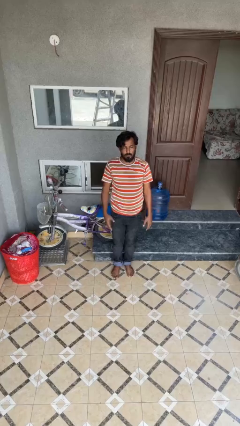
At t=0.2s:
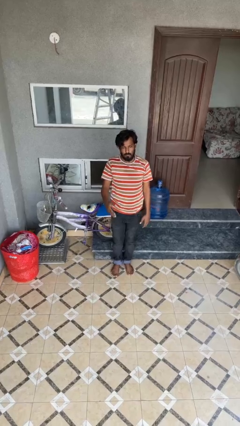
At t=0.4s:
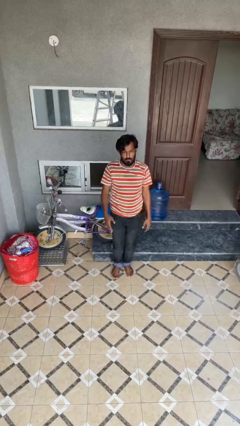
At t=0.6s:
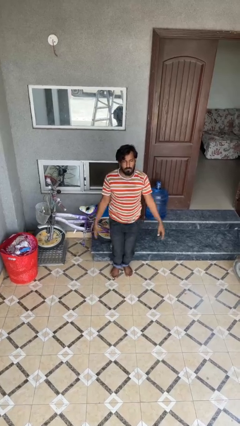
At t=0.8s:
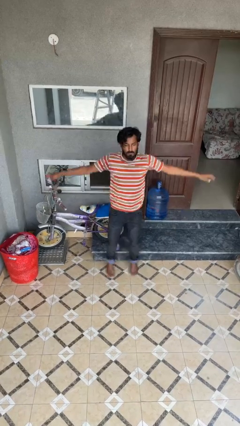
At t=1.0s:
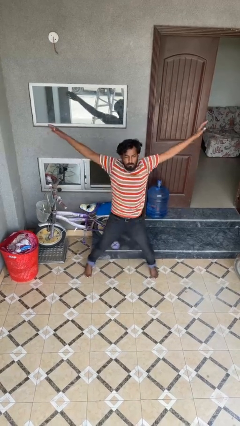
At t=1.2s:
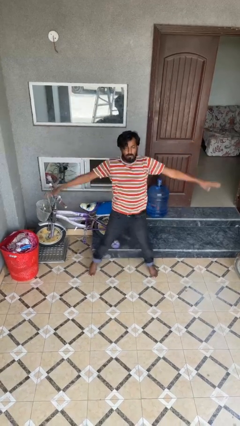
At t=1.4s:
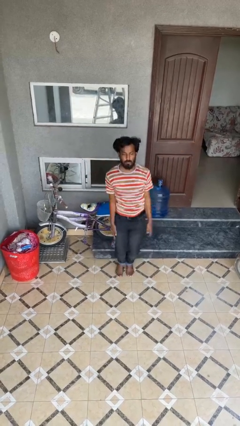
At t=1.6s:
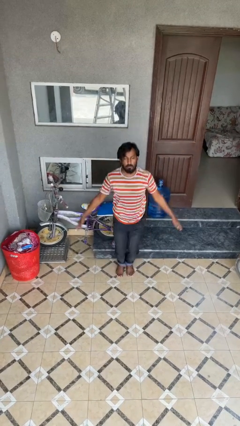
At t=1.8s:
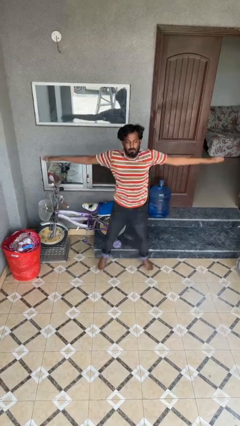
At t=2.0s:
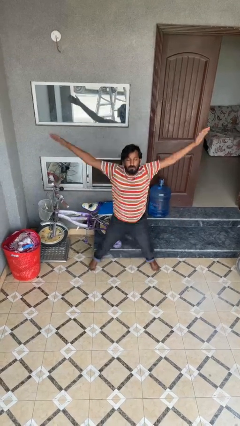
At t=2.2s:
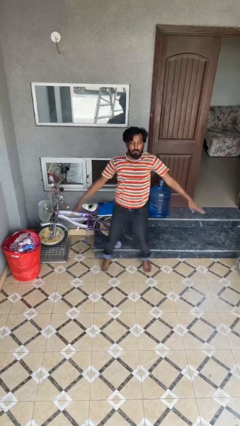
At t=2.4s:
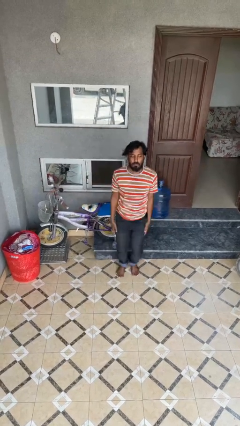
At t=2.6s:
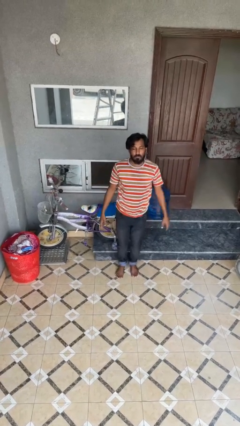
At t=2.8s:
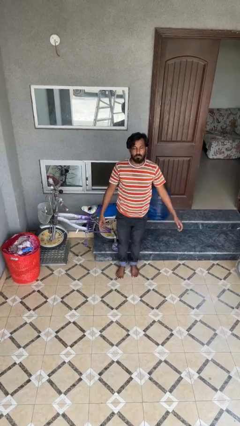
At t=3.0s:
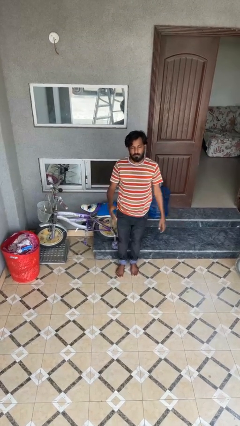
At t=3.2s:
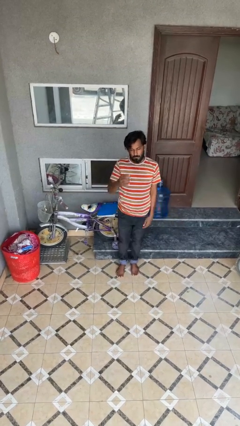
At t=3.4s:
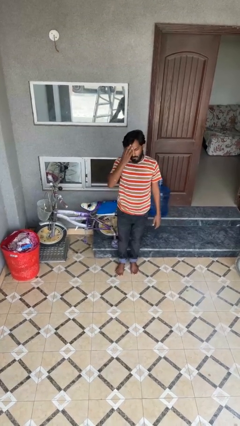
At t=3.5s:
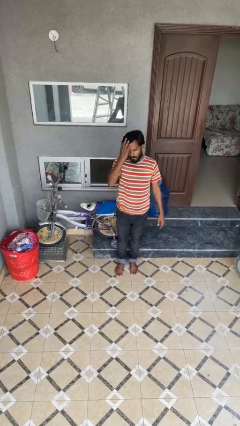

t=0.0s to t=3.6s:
person exercises with jumping jacks

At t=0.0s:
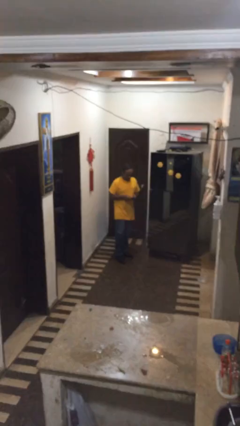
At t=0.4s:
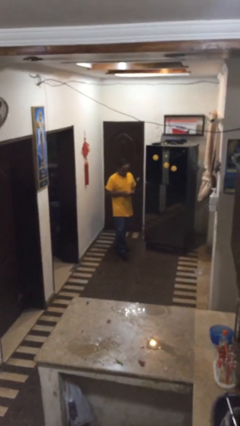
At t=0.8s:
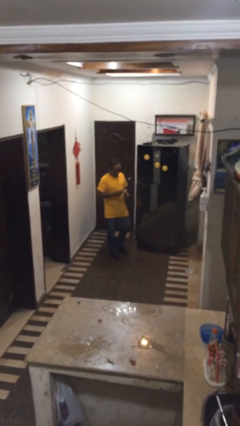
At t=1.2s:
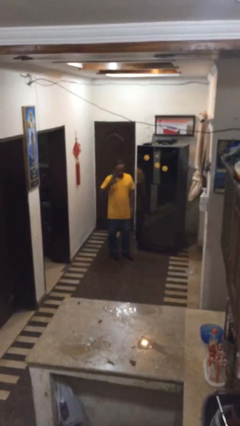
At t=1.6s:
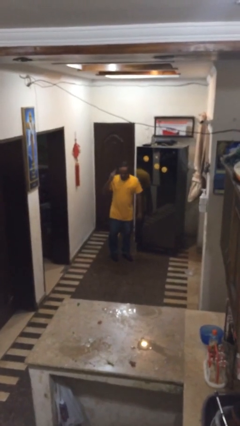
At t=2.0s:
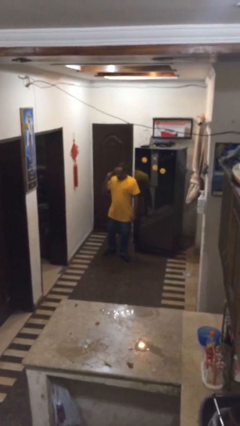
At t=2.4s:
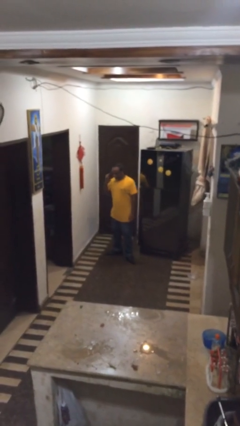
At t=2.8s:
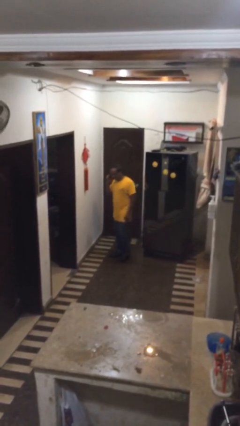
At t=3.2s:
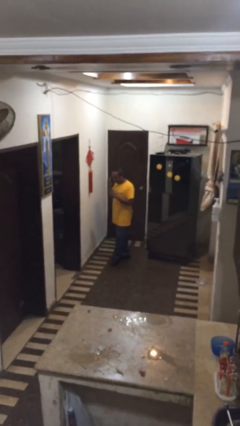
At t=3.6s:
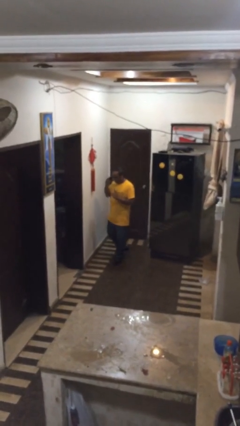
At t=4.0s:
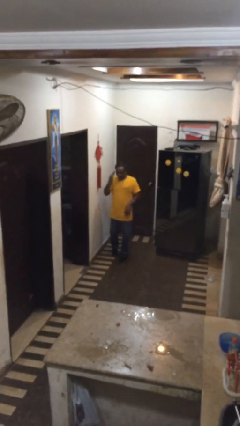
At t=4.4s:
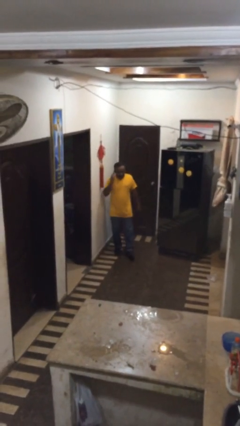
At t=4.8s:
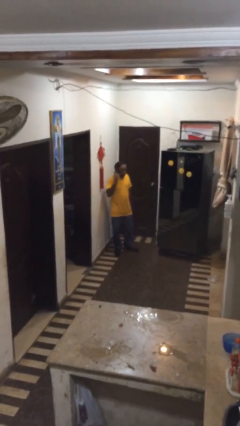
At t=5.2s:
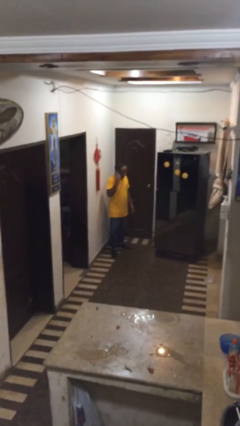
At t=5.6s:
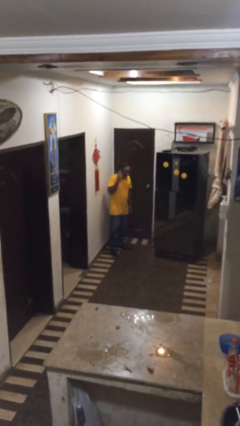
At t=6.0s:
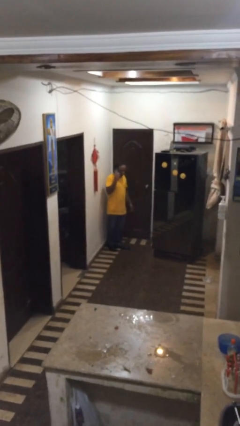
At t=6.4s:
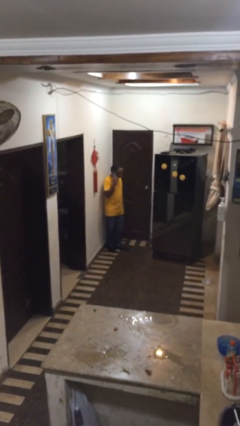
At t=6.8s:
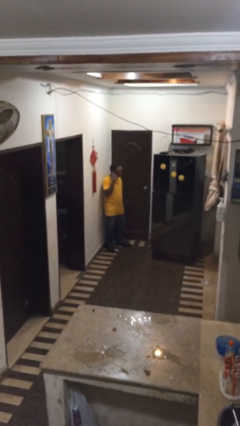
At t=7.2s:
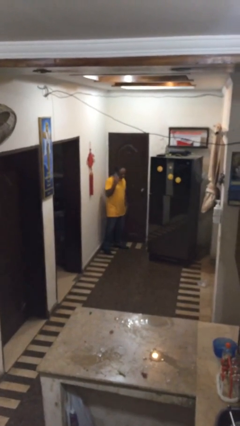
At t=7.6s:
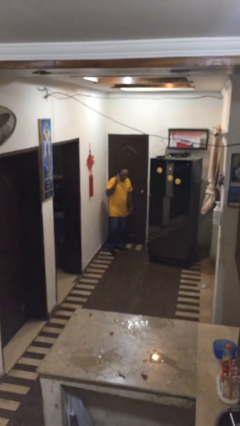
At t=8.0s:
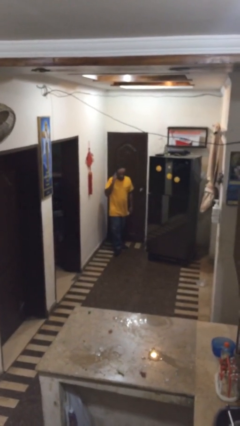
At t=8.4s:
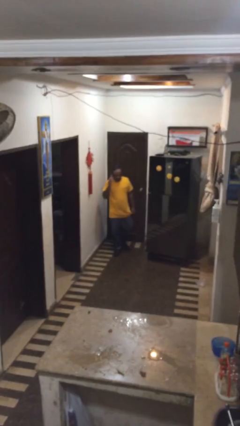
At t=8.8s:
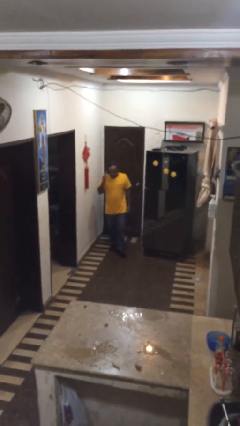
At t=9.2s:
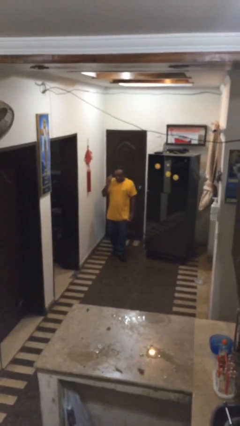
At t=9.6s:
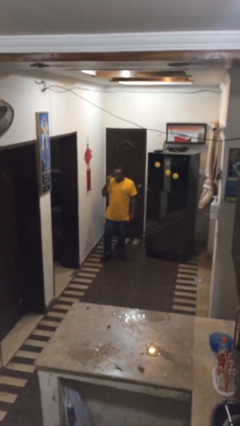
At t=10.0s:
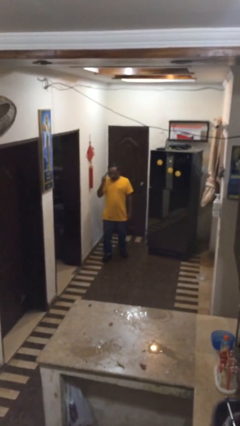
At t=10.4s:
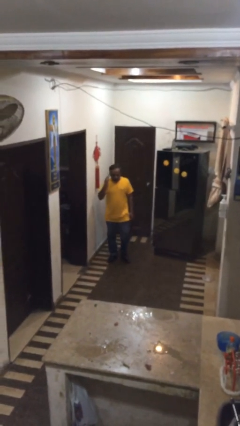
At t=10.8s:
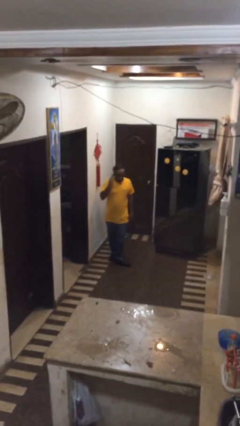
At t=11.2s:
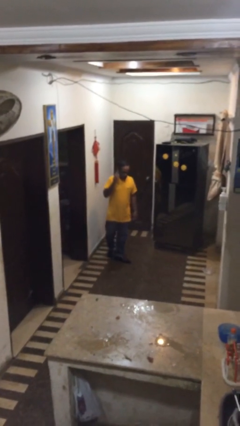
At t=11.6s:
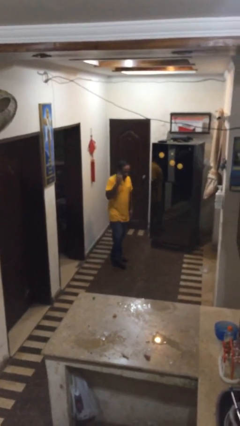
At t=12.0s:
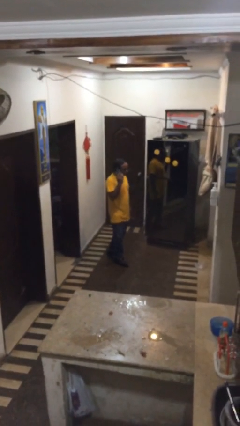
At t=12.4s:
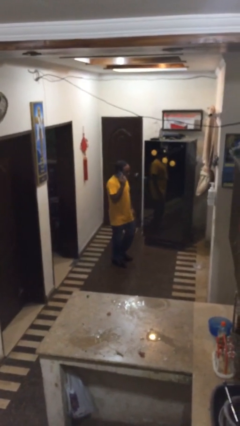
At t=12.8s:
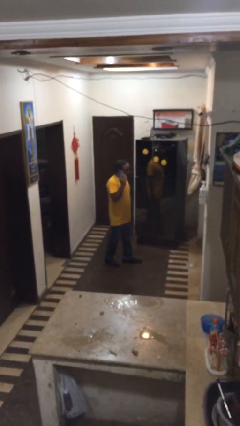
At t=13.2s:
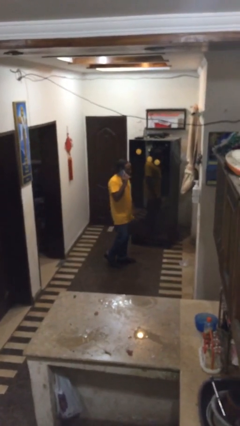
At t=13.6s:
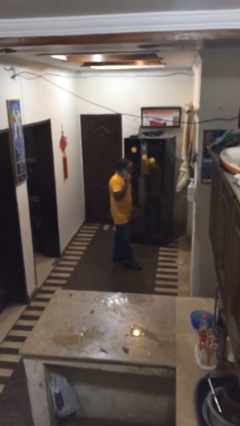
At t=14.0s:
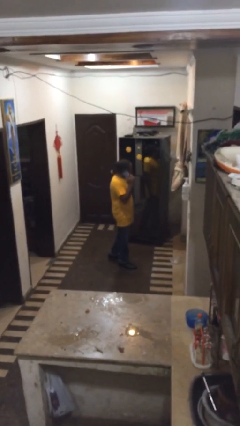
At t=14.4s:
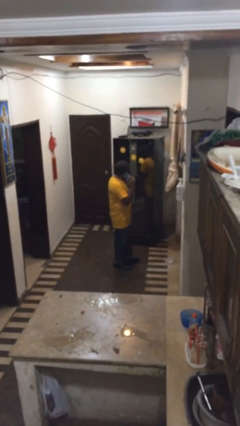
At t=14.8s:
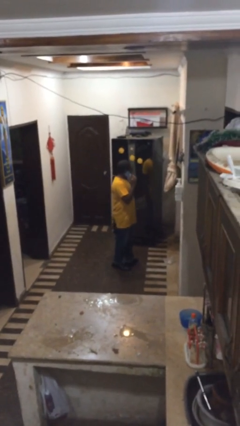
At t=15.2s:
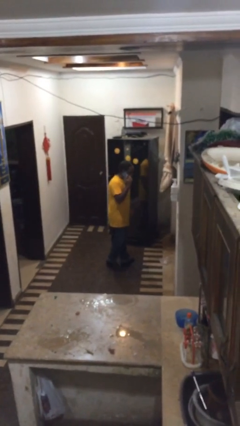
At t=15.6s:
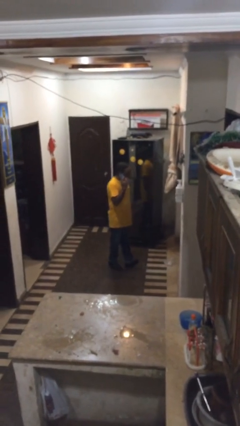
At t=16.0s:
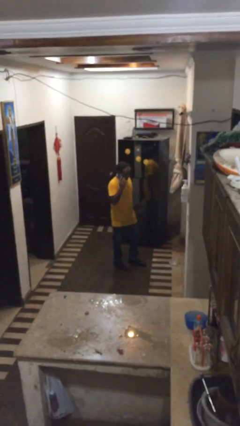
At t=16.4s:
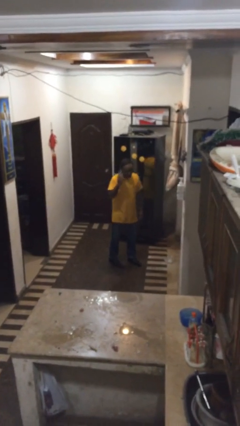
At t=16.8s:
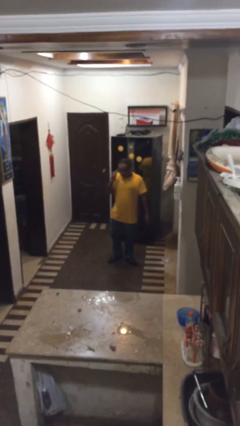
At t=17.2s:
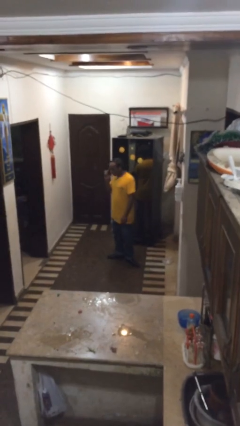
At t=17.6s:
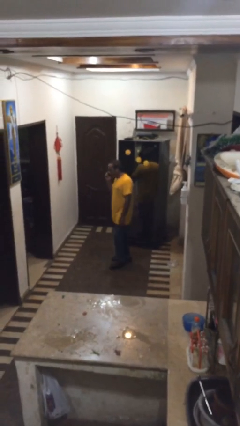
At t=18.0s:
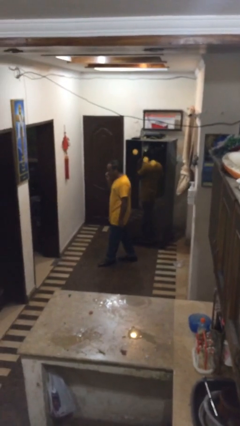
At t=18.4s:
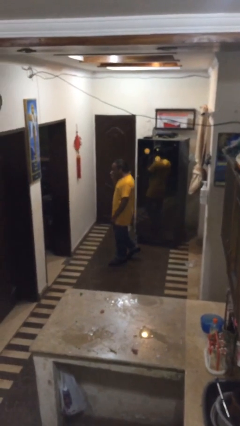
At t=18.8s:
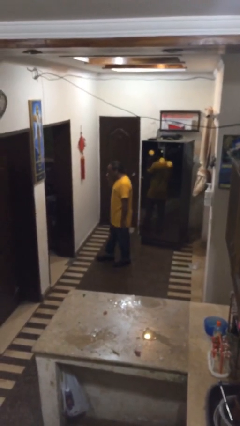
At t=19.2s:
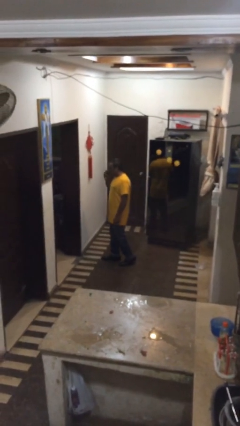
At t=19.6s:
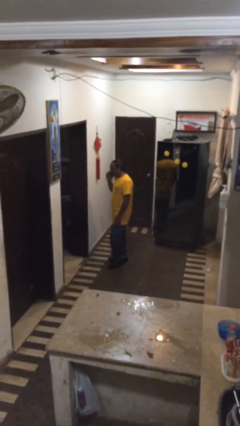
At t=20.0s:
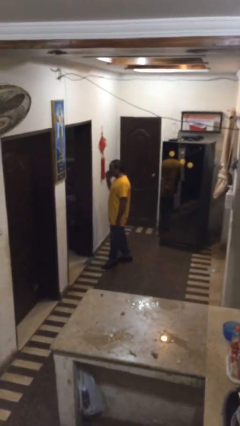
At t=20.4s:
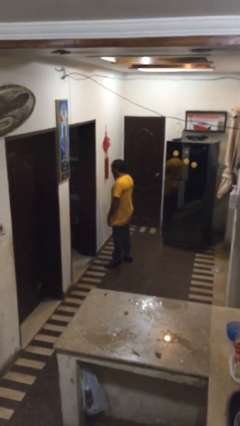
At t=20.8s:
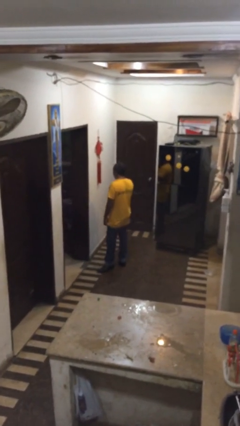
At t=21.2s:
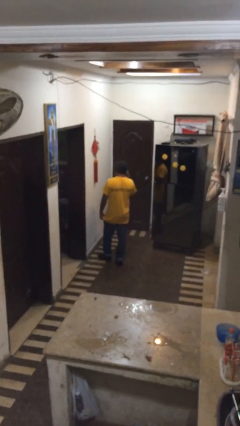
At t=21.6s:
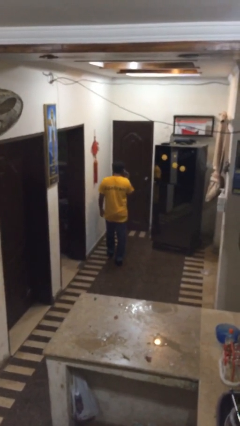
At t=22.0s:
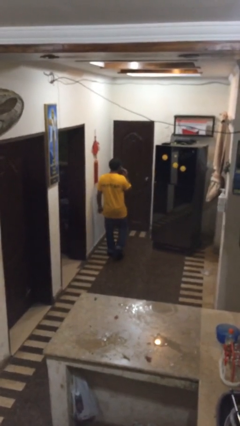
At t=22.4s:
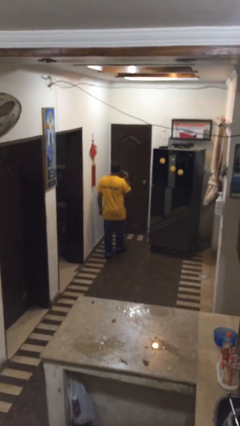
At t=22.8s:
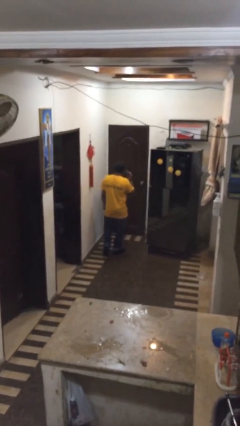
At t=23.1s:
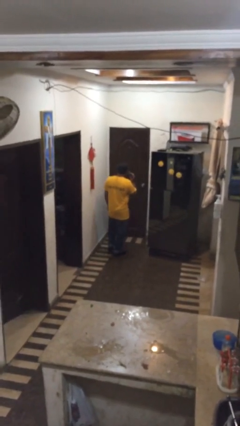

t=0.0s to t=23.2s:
person talks on phone

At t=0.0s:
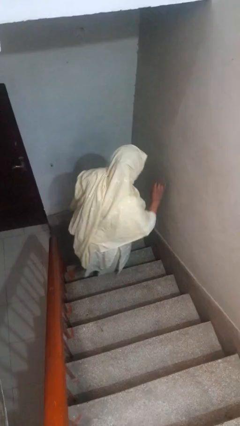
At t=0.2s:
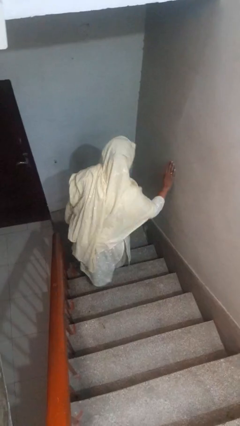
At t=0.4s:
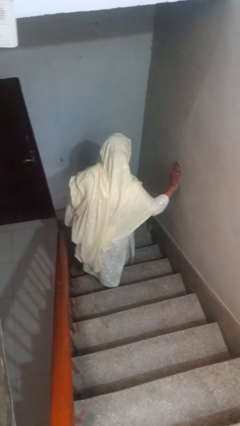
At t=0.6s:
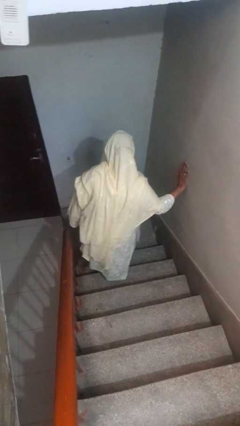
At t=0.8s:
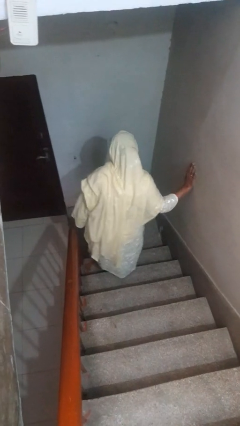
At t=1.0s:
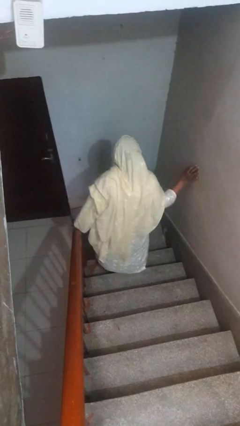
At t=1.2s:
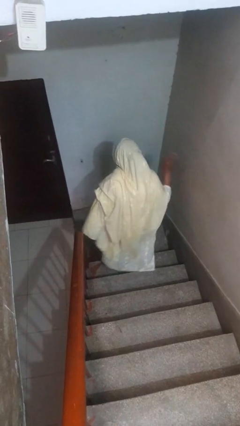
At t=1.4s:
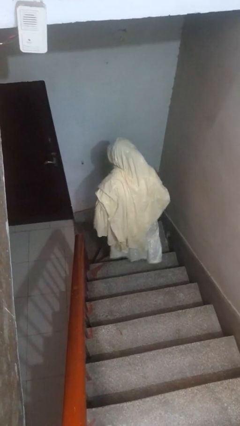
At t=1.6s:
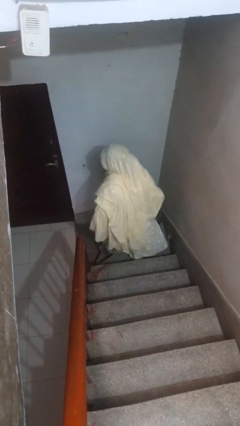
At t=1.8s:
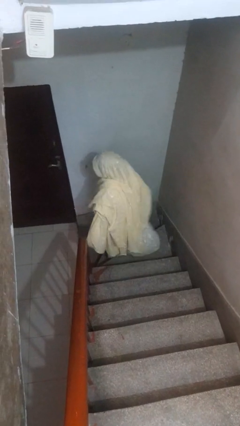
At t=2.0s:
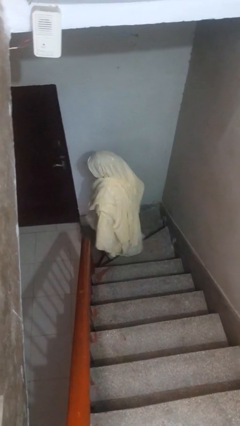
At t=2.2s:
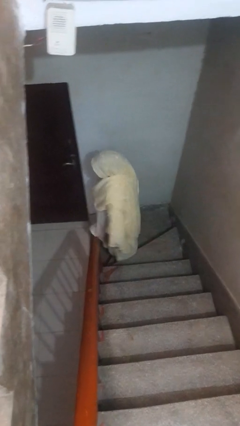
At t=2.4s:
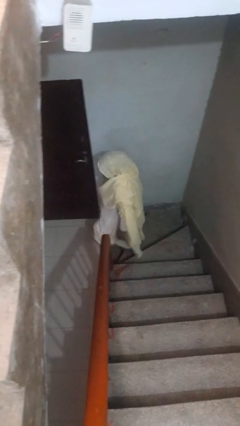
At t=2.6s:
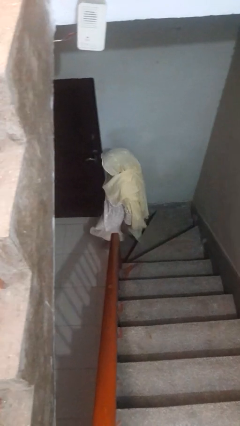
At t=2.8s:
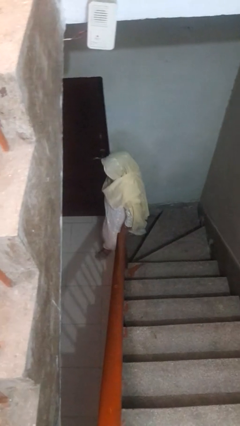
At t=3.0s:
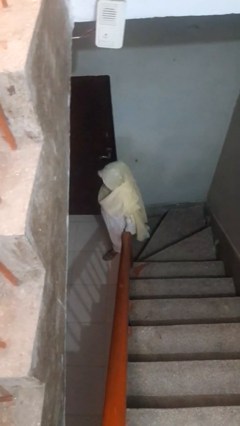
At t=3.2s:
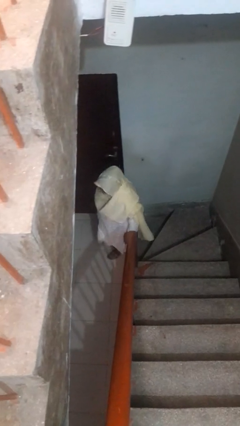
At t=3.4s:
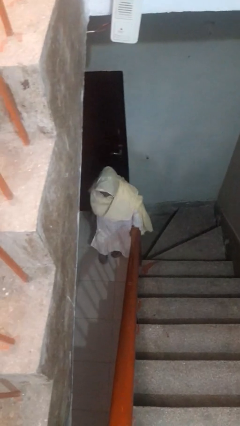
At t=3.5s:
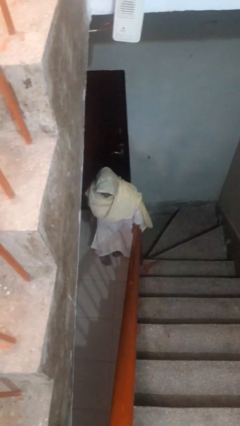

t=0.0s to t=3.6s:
person climbs down stairs
